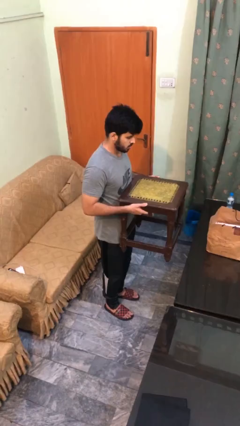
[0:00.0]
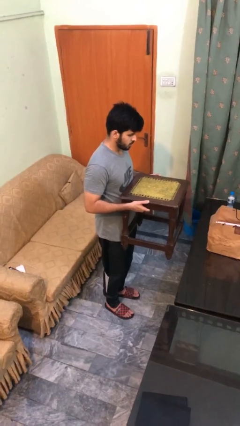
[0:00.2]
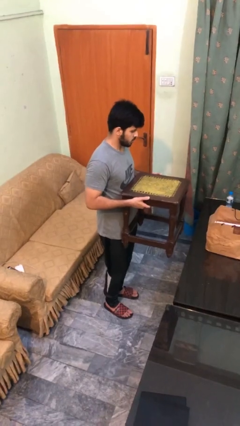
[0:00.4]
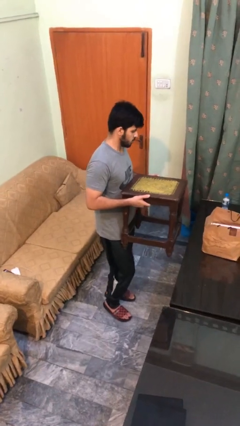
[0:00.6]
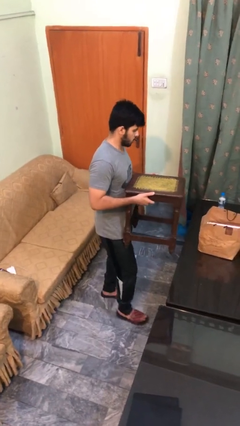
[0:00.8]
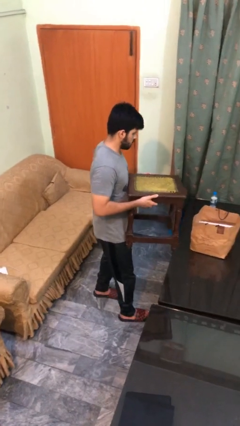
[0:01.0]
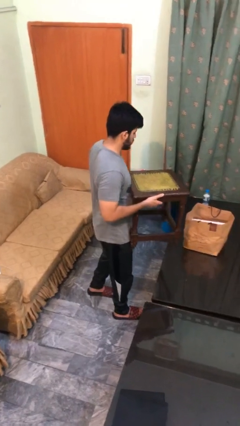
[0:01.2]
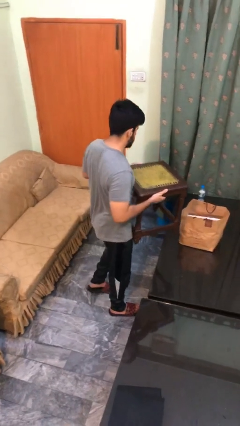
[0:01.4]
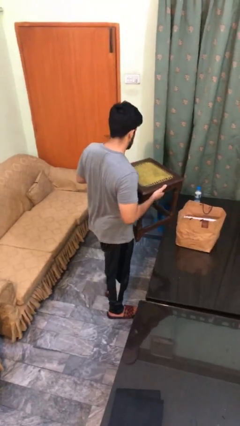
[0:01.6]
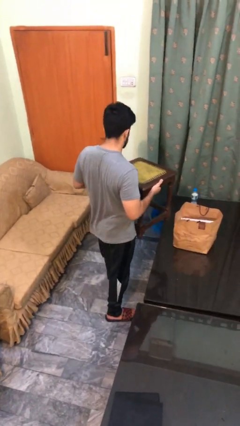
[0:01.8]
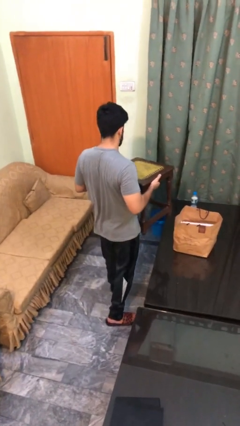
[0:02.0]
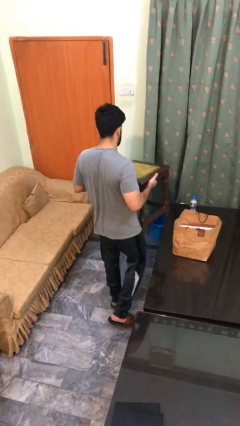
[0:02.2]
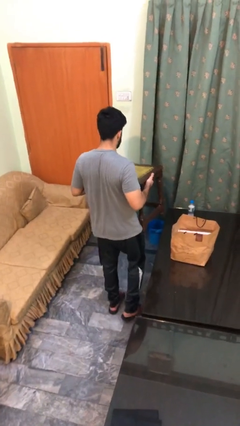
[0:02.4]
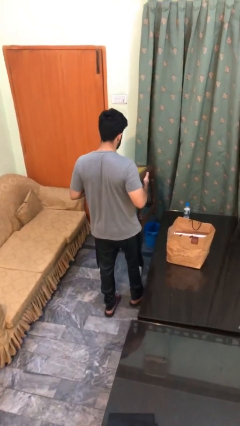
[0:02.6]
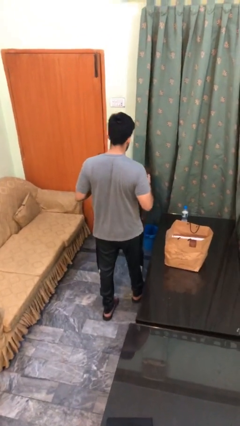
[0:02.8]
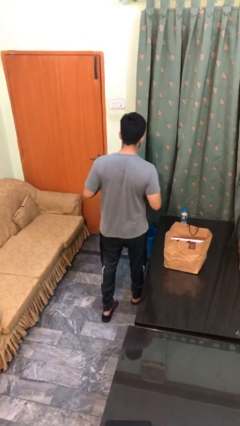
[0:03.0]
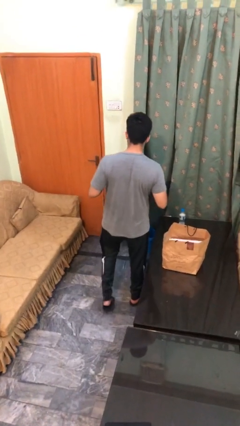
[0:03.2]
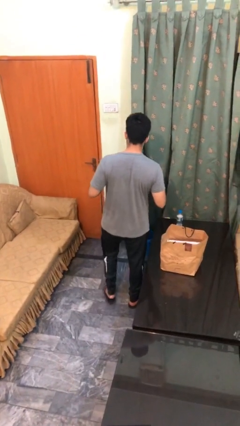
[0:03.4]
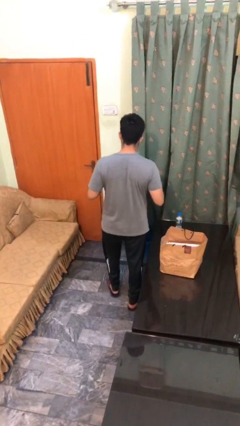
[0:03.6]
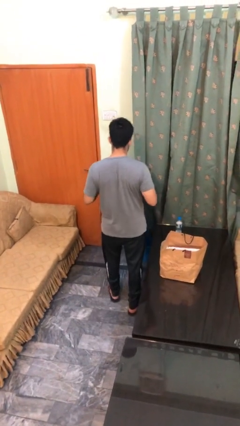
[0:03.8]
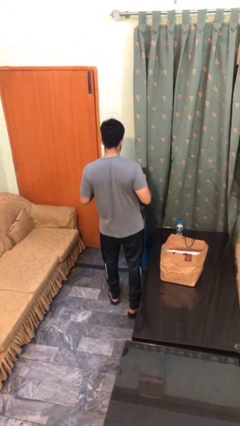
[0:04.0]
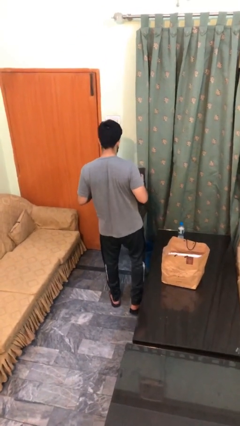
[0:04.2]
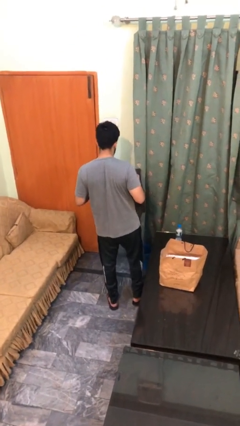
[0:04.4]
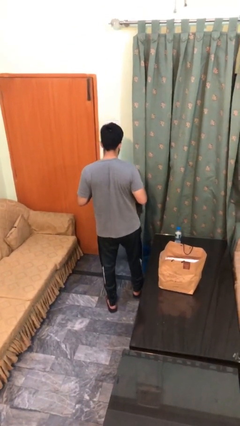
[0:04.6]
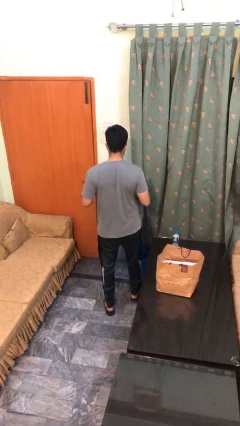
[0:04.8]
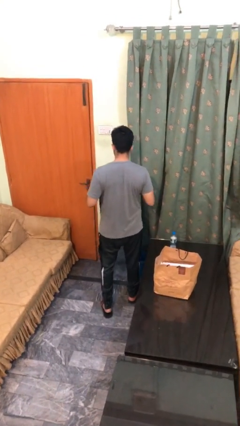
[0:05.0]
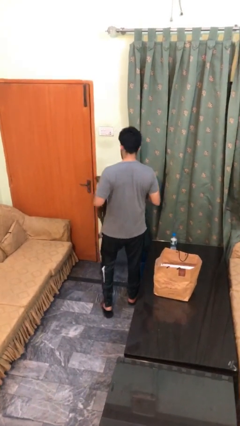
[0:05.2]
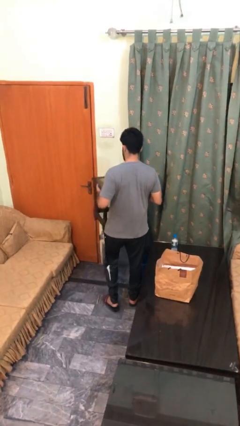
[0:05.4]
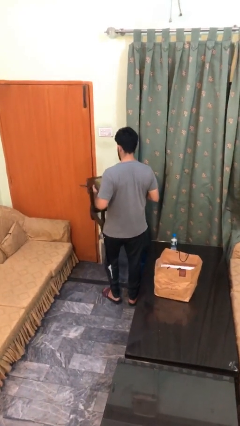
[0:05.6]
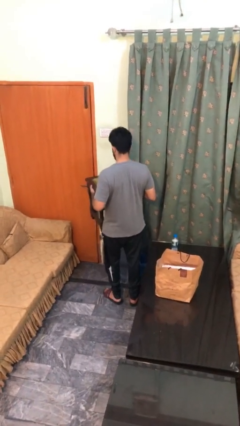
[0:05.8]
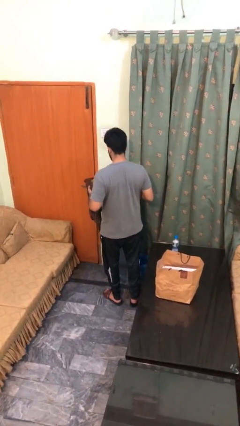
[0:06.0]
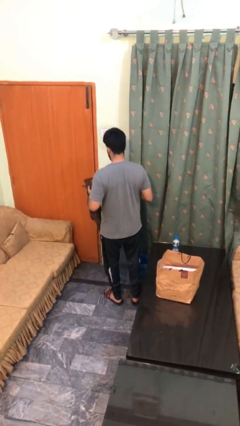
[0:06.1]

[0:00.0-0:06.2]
person carries furniture

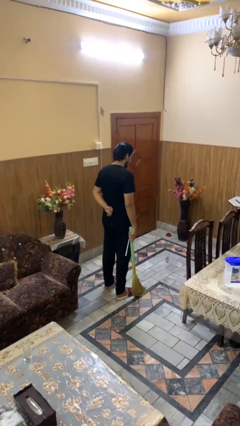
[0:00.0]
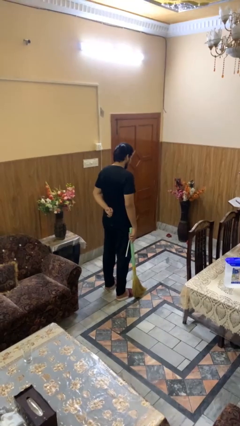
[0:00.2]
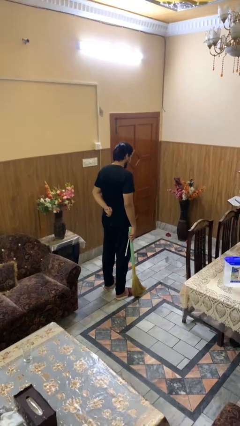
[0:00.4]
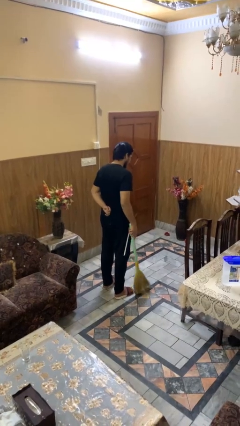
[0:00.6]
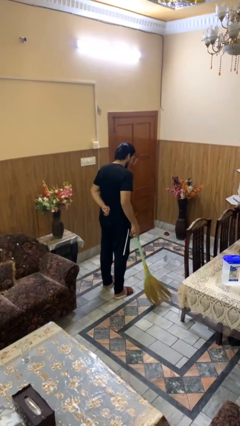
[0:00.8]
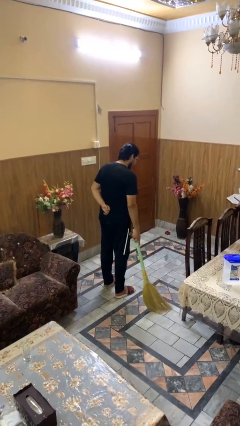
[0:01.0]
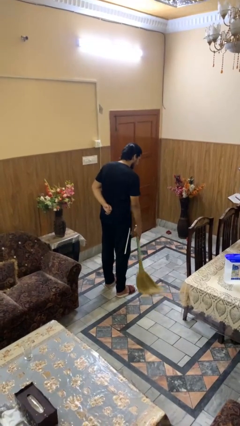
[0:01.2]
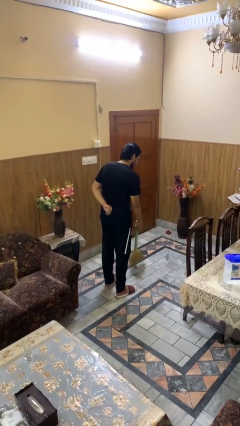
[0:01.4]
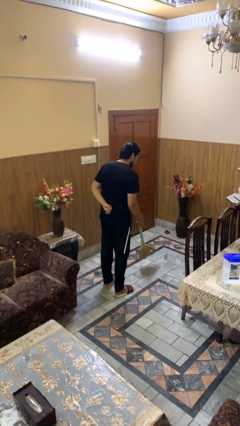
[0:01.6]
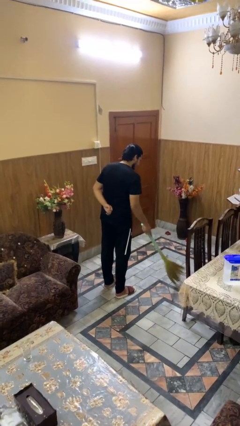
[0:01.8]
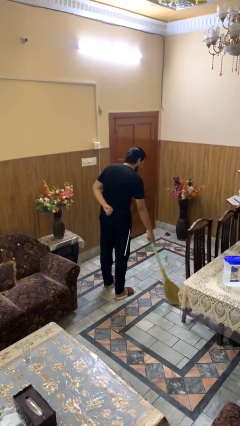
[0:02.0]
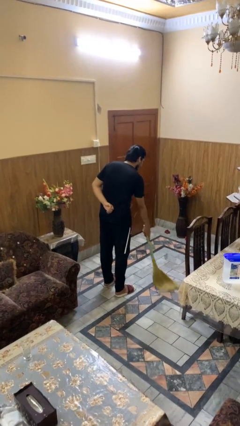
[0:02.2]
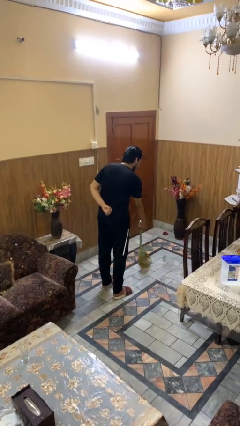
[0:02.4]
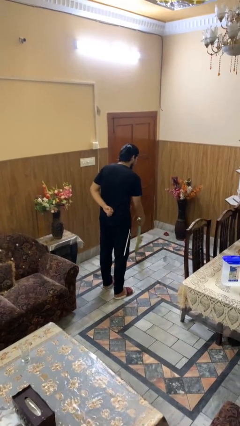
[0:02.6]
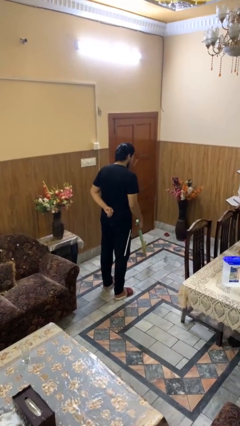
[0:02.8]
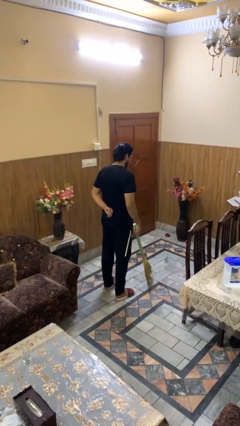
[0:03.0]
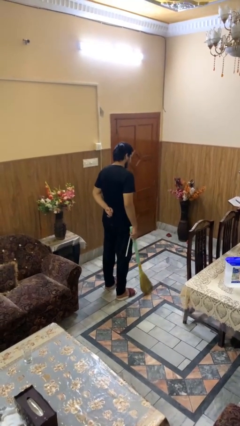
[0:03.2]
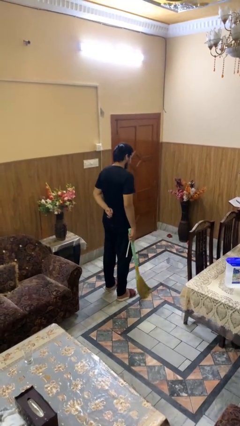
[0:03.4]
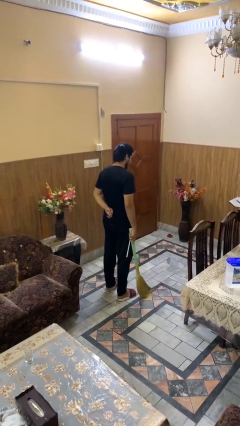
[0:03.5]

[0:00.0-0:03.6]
person sweeps floor

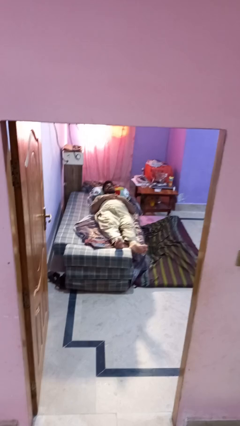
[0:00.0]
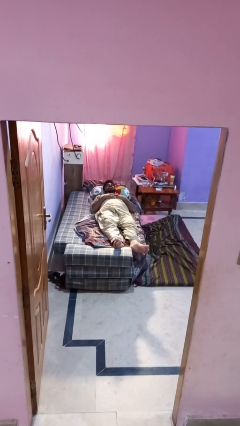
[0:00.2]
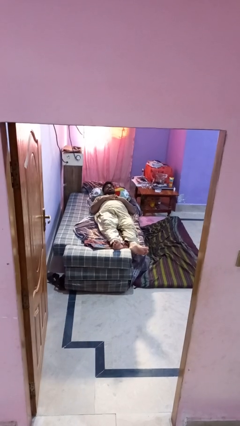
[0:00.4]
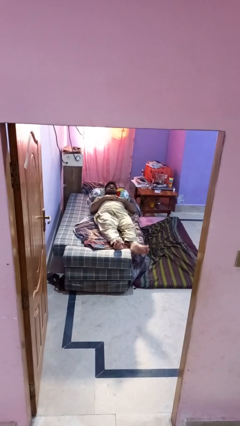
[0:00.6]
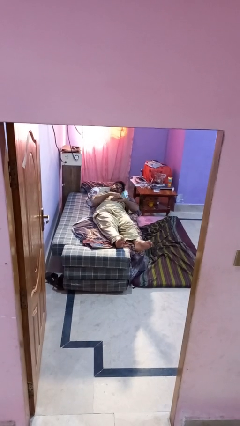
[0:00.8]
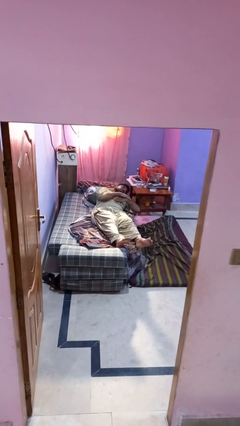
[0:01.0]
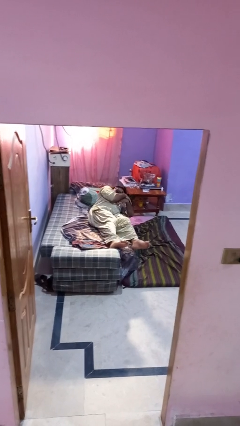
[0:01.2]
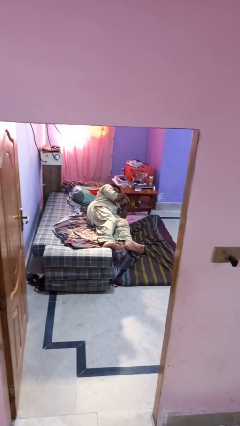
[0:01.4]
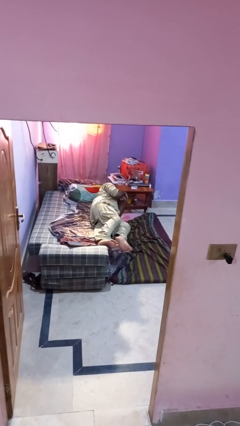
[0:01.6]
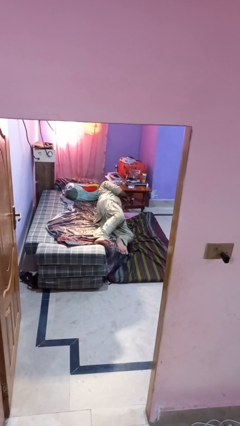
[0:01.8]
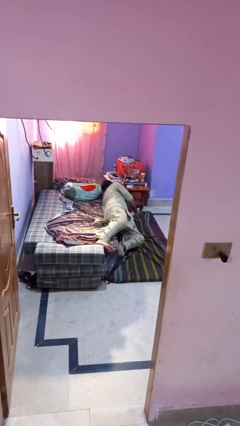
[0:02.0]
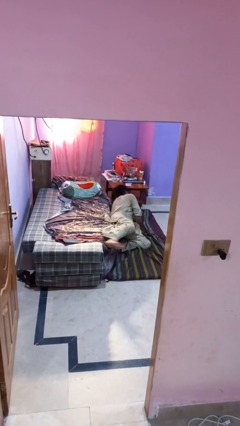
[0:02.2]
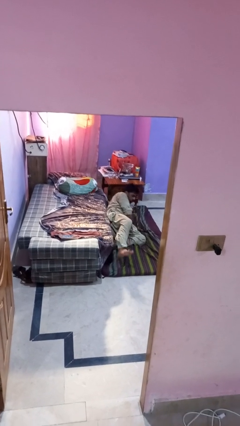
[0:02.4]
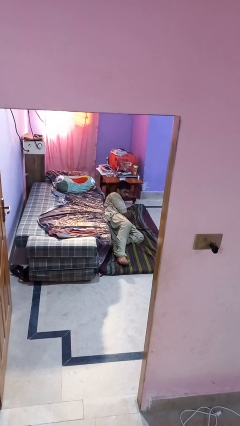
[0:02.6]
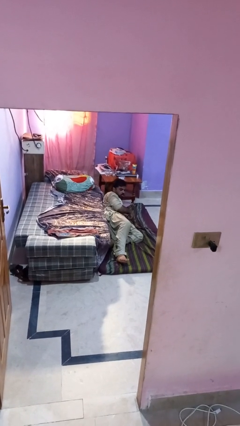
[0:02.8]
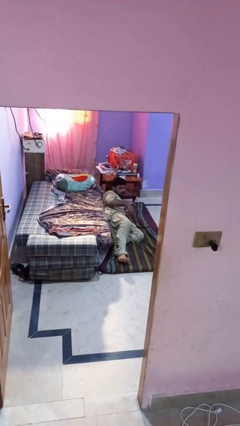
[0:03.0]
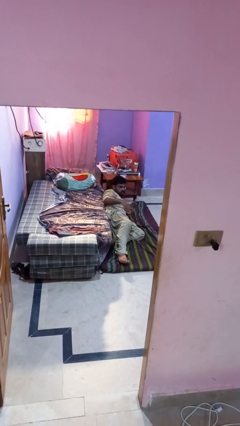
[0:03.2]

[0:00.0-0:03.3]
person falls from bed

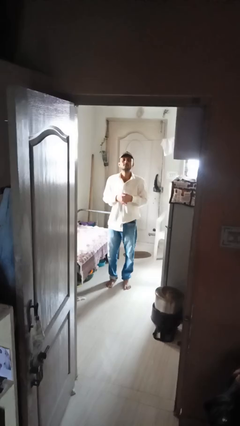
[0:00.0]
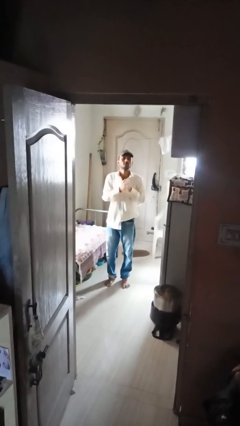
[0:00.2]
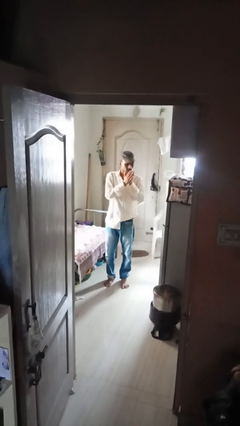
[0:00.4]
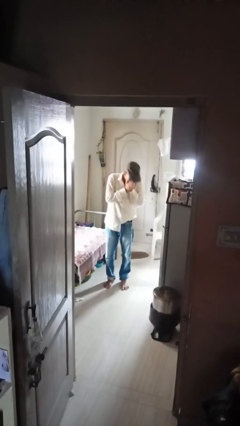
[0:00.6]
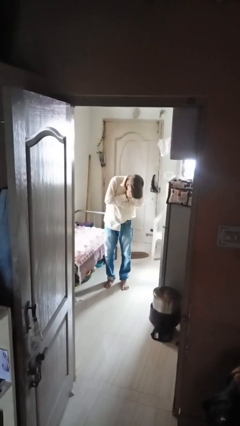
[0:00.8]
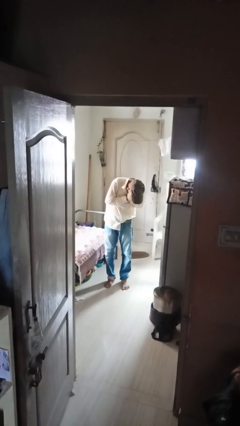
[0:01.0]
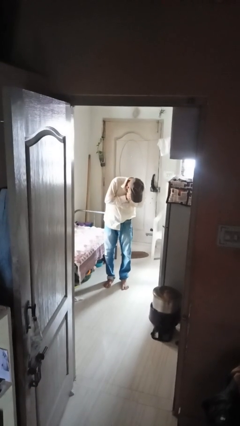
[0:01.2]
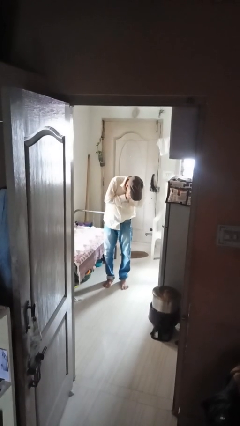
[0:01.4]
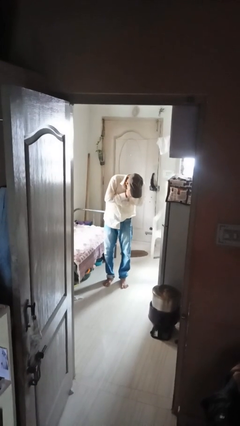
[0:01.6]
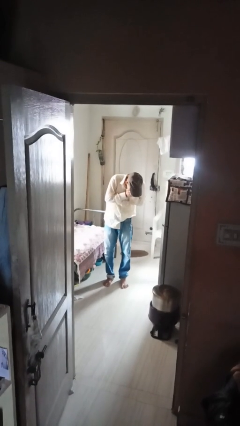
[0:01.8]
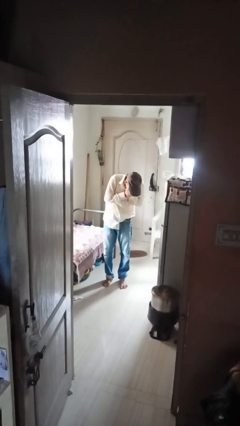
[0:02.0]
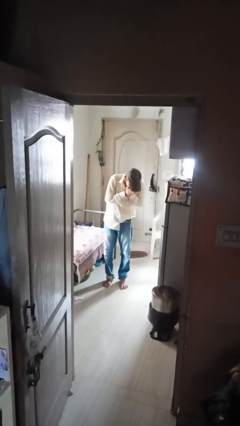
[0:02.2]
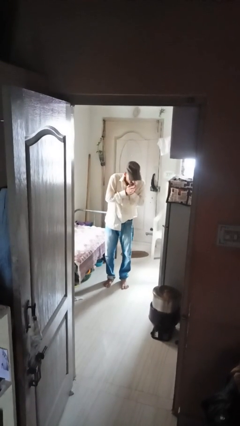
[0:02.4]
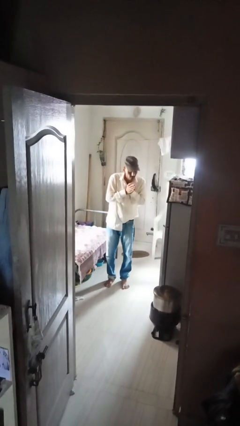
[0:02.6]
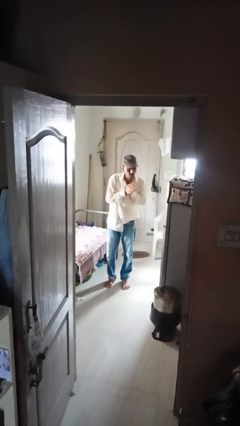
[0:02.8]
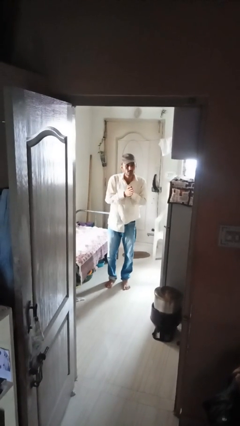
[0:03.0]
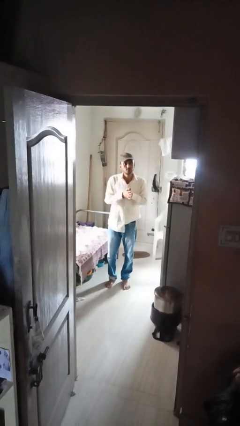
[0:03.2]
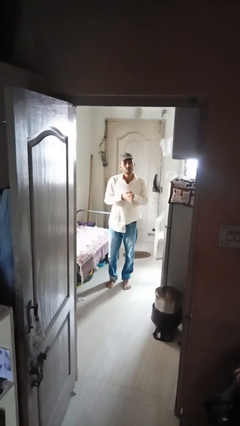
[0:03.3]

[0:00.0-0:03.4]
person sneezes into hand

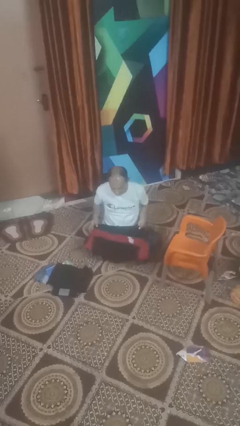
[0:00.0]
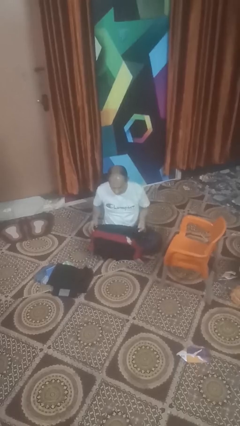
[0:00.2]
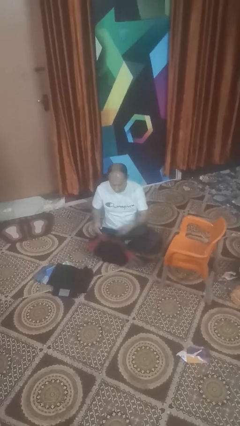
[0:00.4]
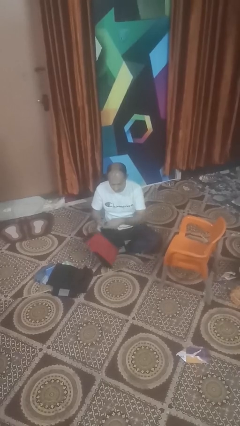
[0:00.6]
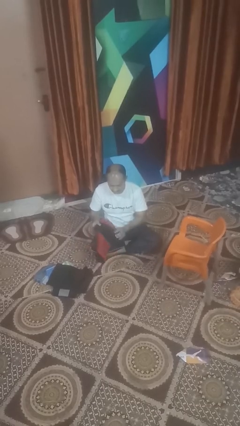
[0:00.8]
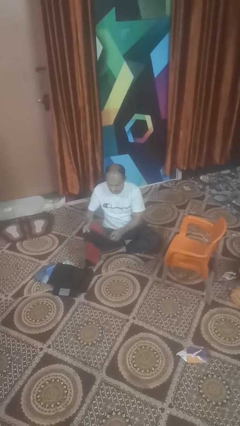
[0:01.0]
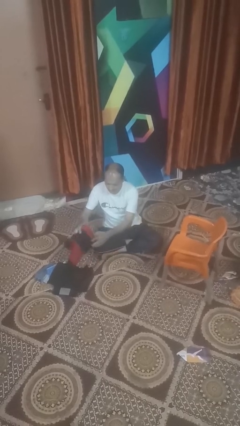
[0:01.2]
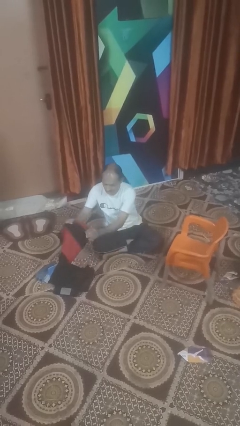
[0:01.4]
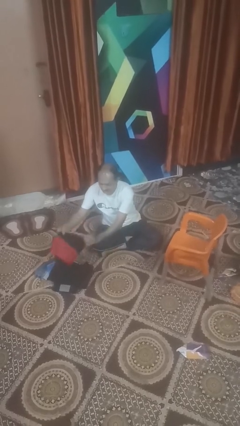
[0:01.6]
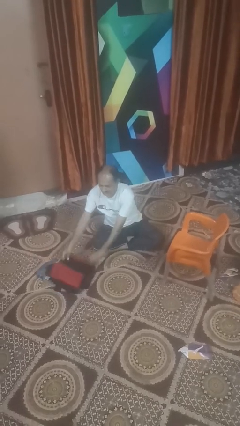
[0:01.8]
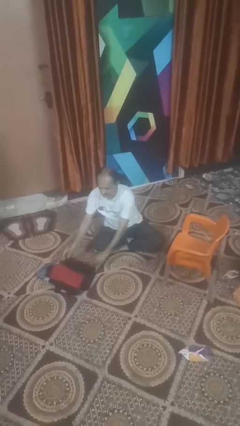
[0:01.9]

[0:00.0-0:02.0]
person folds shirt
